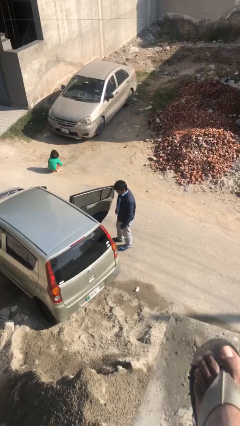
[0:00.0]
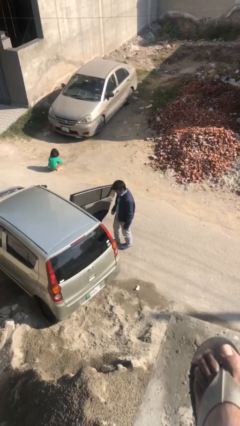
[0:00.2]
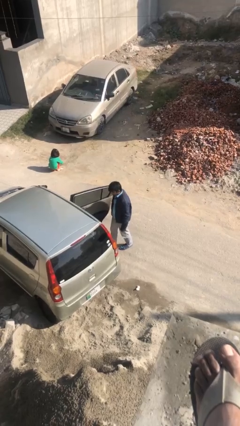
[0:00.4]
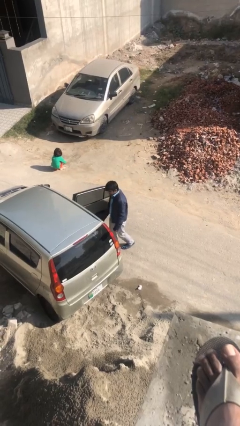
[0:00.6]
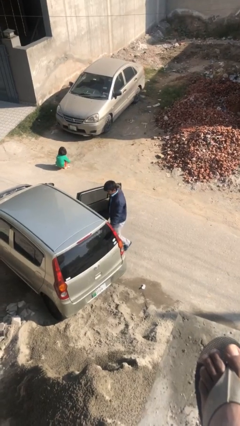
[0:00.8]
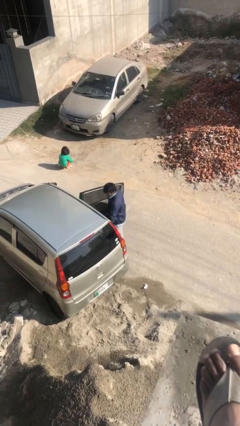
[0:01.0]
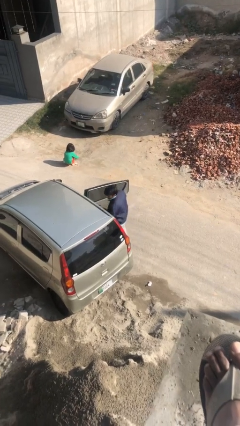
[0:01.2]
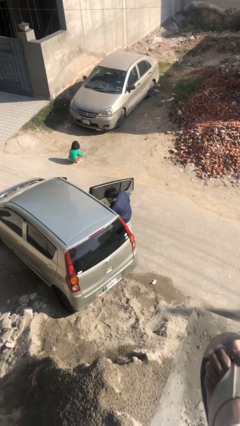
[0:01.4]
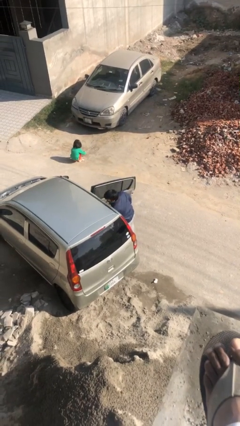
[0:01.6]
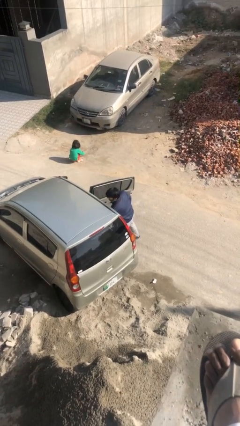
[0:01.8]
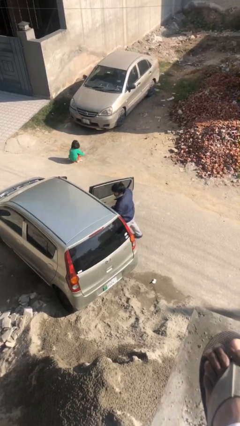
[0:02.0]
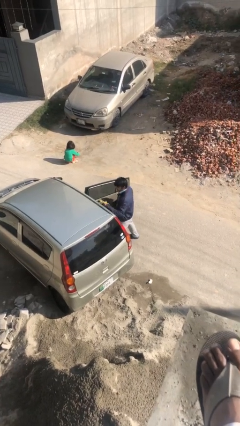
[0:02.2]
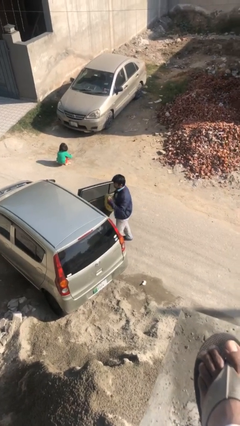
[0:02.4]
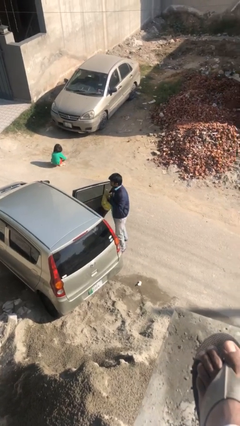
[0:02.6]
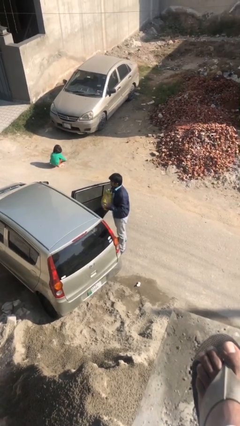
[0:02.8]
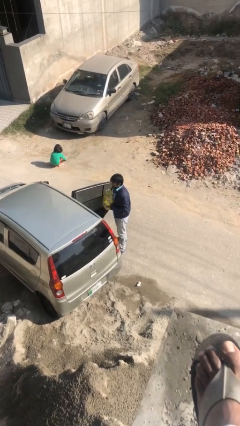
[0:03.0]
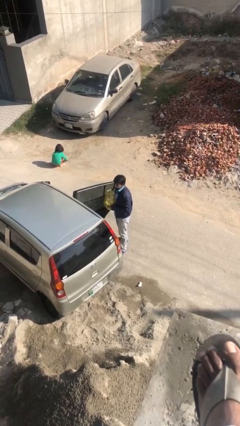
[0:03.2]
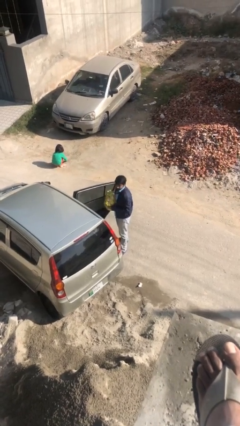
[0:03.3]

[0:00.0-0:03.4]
person unloads car

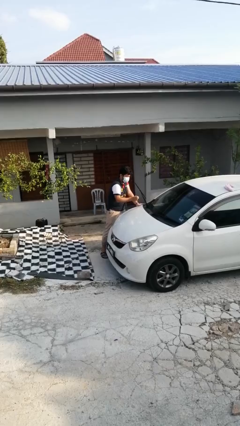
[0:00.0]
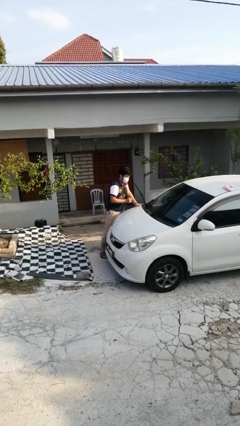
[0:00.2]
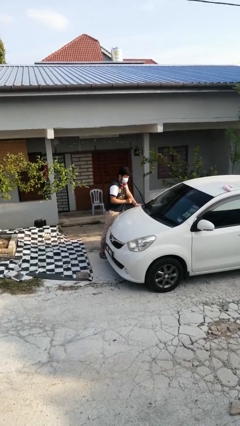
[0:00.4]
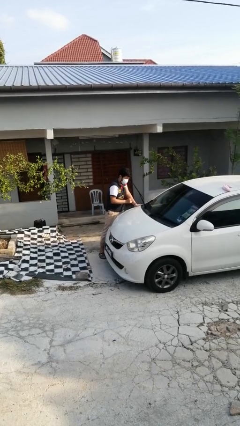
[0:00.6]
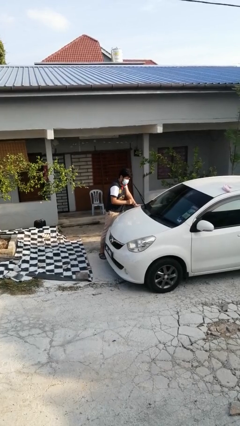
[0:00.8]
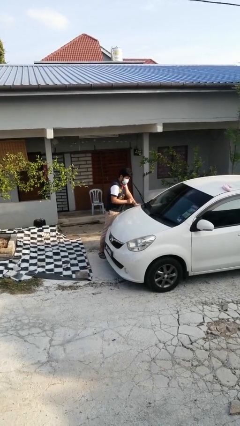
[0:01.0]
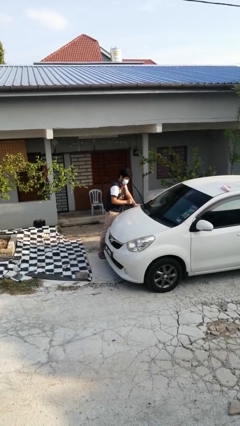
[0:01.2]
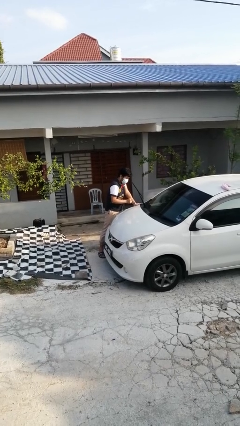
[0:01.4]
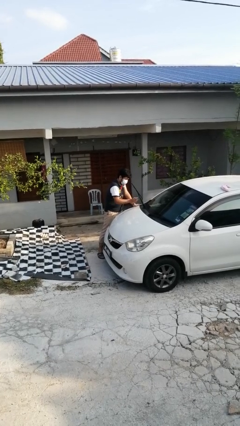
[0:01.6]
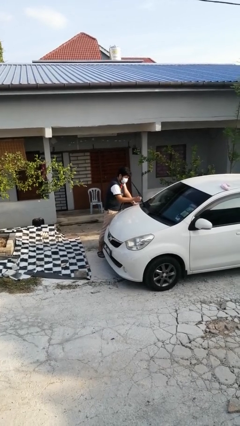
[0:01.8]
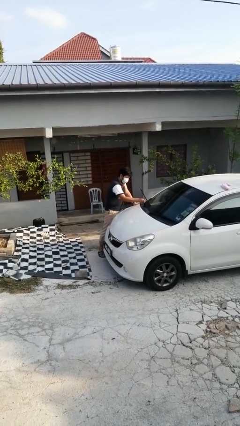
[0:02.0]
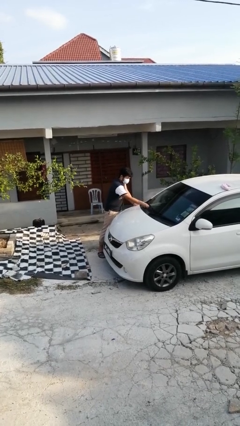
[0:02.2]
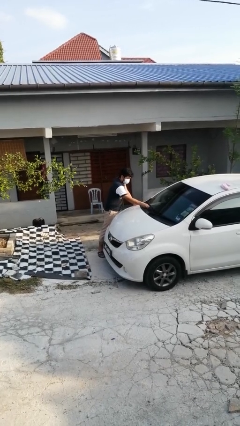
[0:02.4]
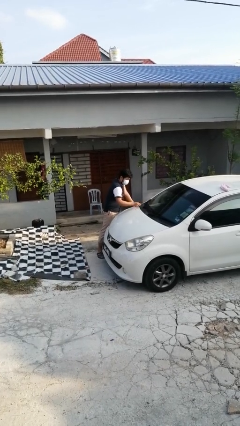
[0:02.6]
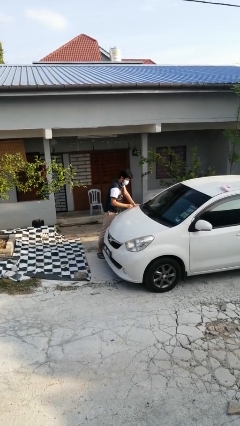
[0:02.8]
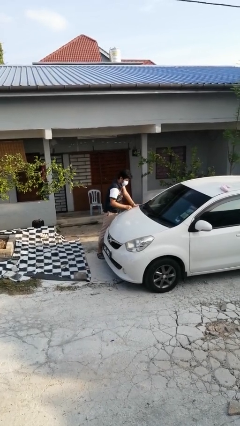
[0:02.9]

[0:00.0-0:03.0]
person flips down car wipers

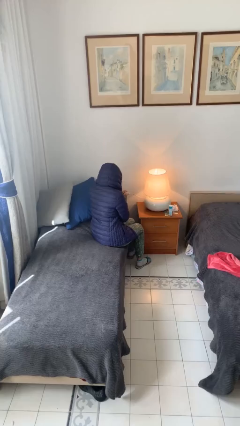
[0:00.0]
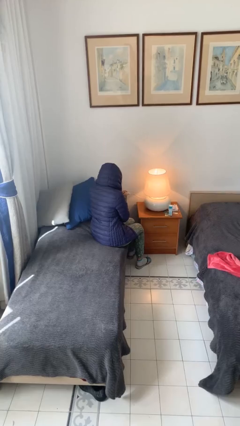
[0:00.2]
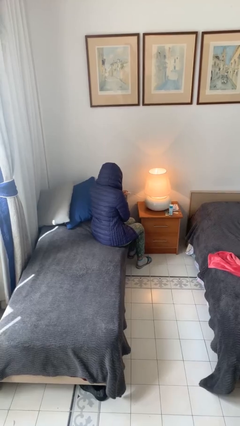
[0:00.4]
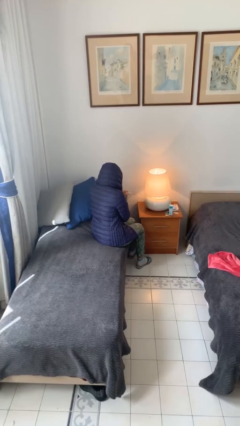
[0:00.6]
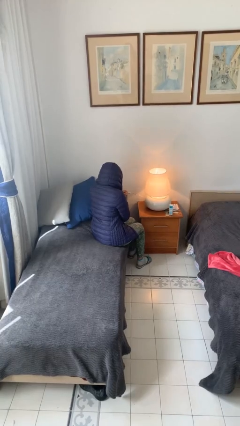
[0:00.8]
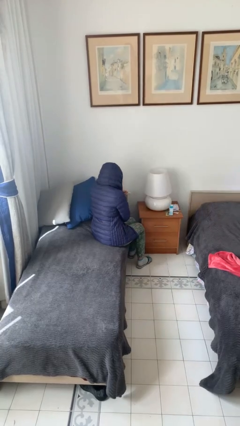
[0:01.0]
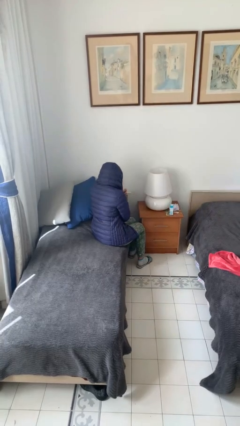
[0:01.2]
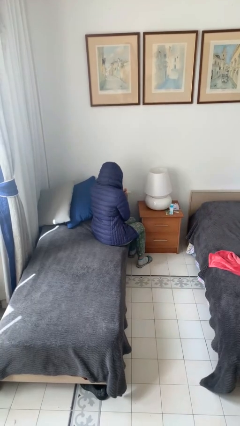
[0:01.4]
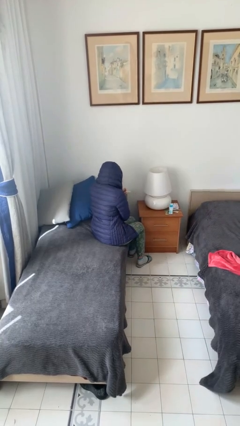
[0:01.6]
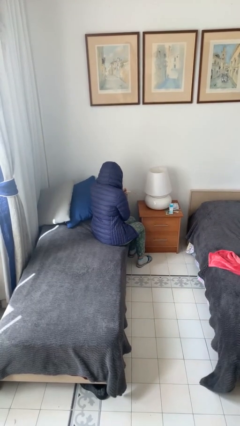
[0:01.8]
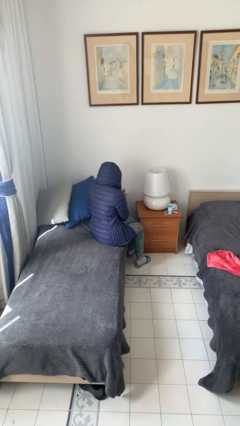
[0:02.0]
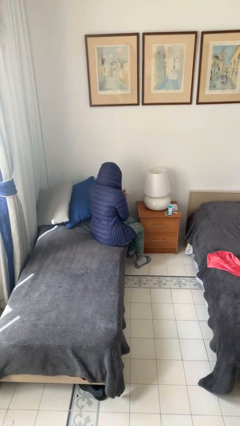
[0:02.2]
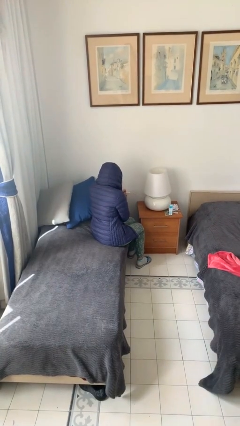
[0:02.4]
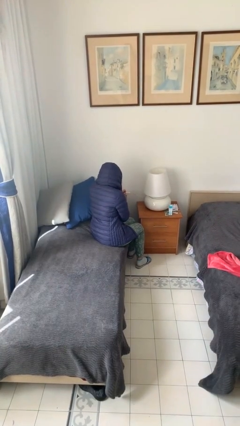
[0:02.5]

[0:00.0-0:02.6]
person turns off lamp

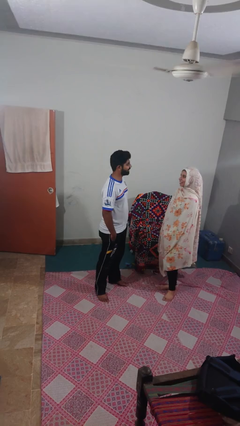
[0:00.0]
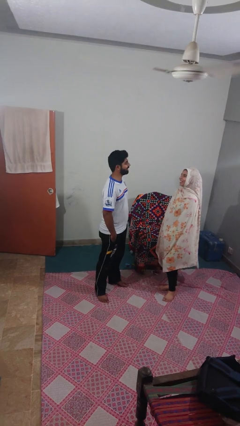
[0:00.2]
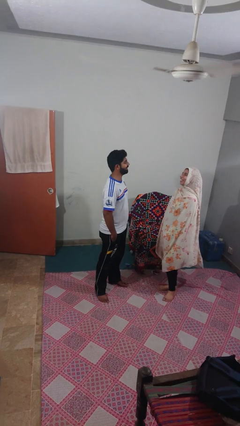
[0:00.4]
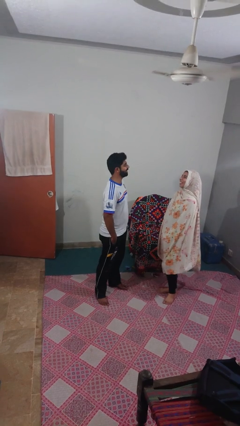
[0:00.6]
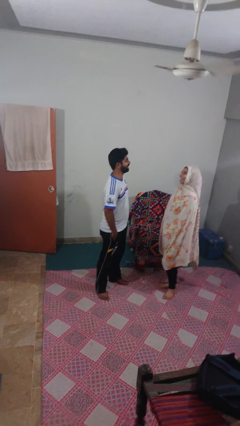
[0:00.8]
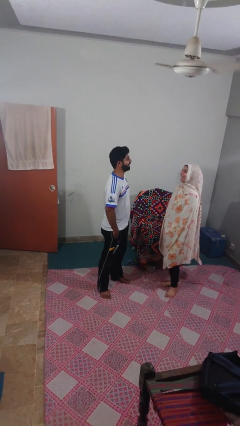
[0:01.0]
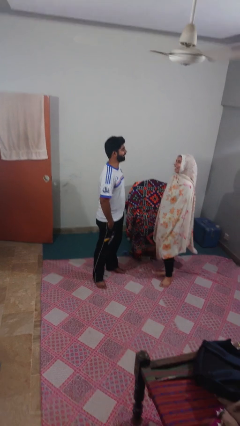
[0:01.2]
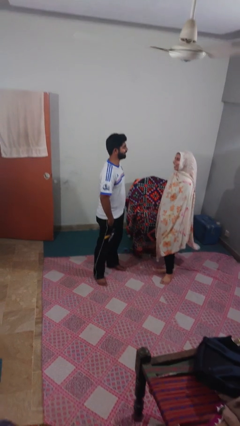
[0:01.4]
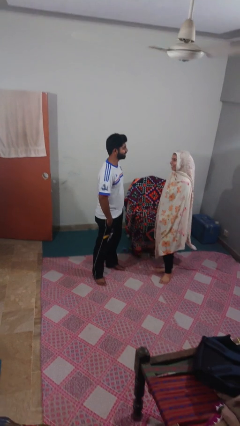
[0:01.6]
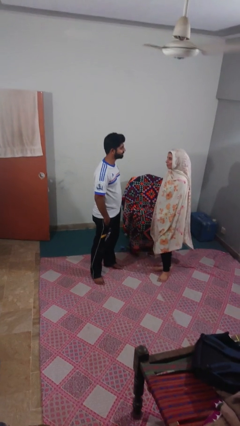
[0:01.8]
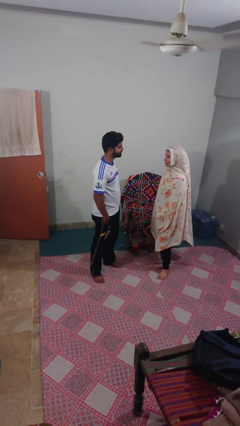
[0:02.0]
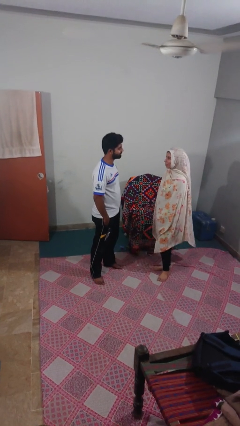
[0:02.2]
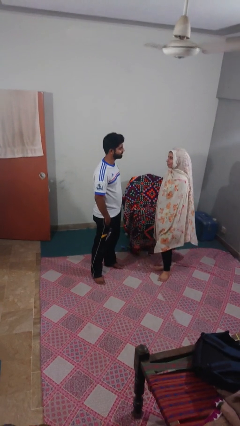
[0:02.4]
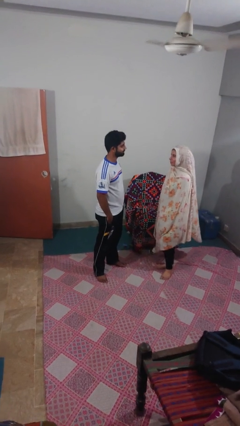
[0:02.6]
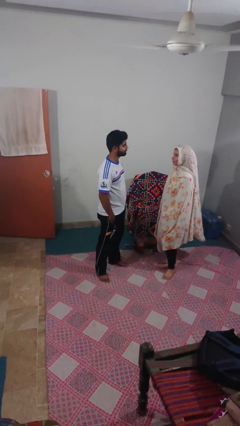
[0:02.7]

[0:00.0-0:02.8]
person laughs with person

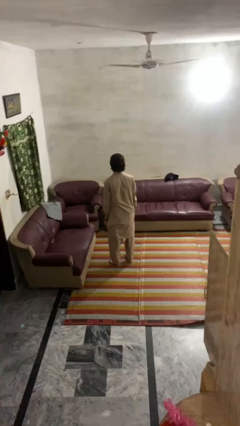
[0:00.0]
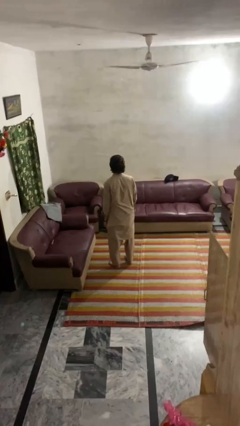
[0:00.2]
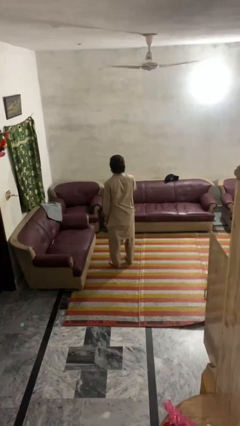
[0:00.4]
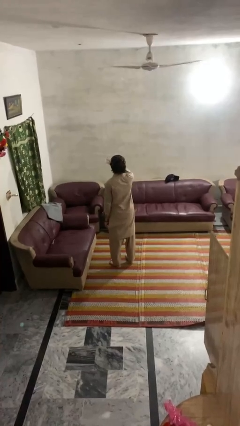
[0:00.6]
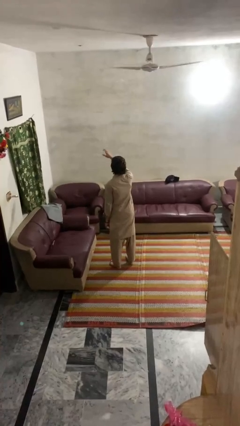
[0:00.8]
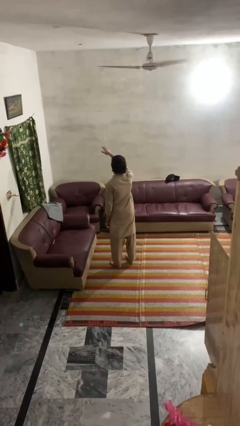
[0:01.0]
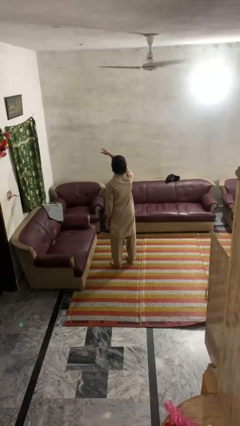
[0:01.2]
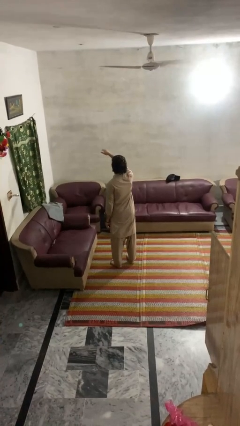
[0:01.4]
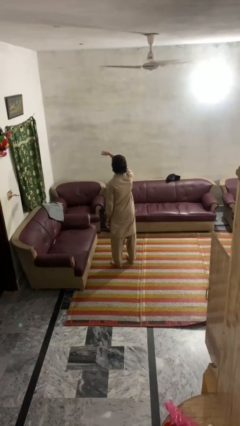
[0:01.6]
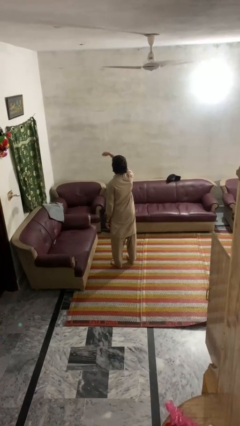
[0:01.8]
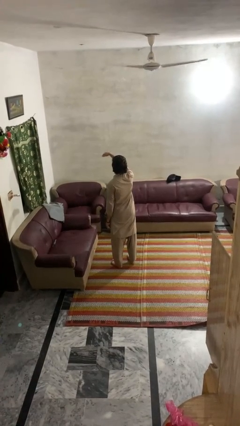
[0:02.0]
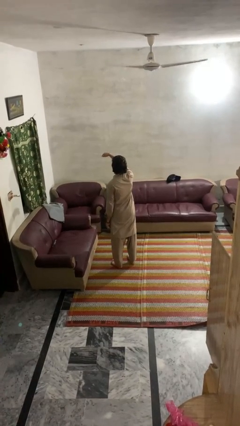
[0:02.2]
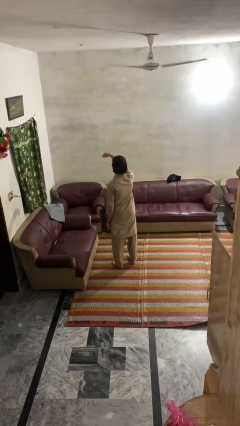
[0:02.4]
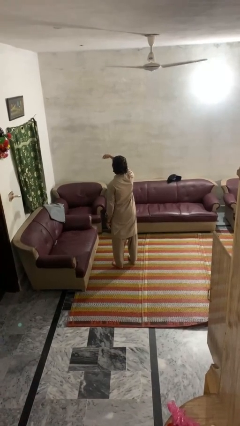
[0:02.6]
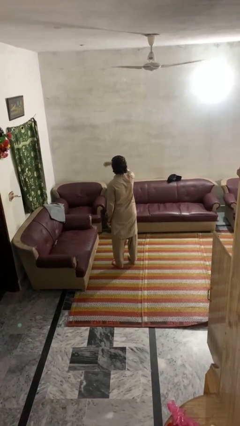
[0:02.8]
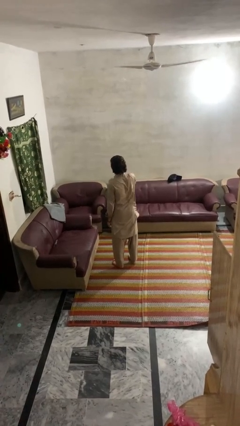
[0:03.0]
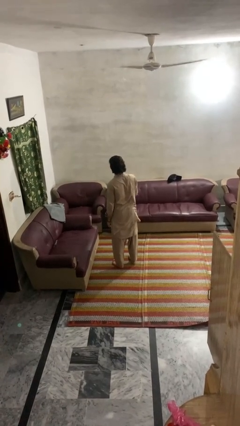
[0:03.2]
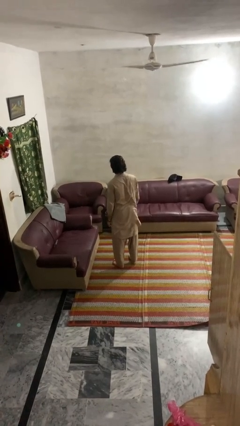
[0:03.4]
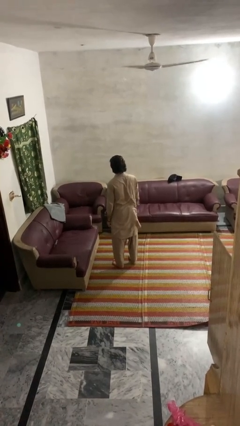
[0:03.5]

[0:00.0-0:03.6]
person gestures come here

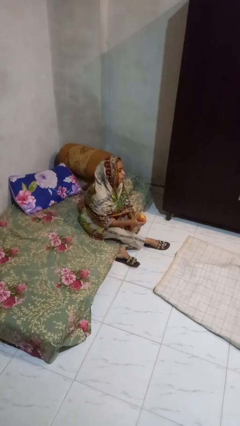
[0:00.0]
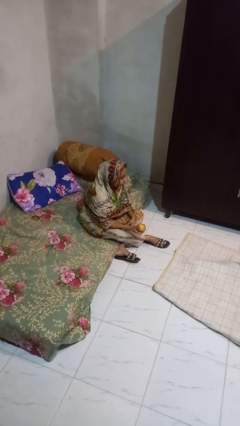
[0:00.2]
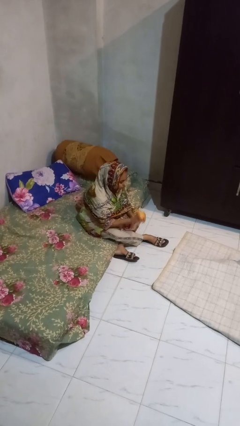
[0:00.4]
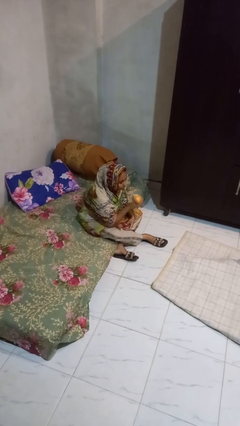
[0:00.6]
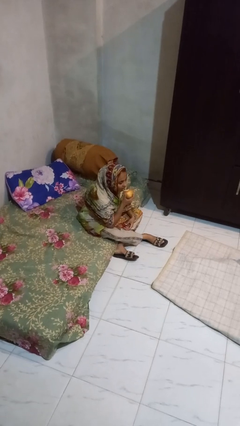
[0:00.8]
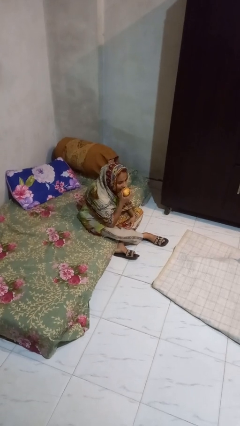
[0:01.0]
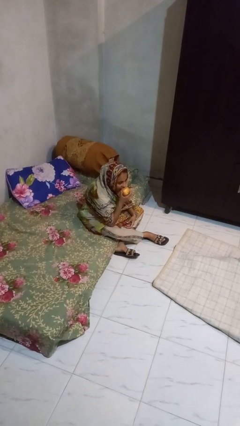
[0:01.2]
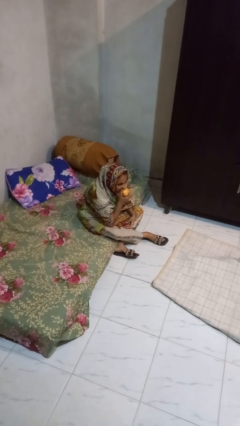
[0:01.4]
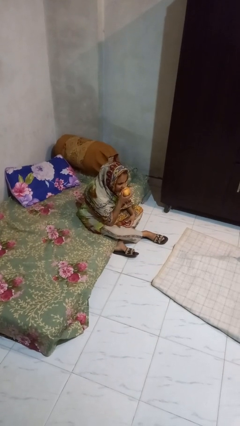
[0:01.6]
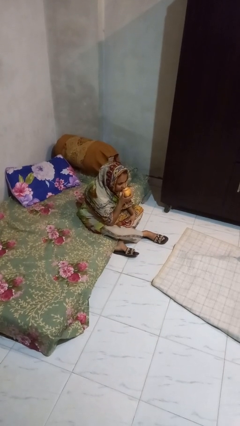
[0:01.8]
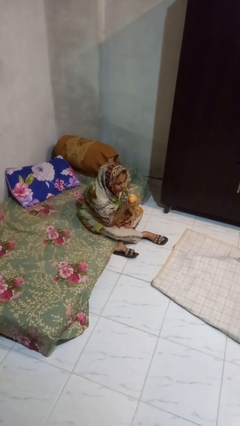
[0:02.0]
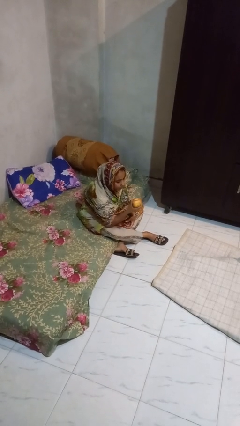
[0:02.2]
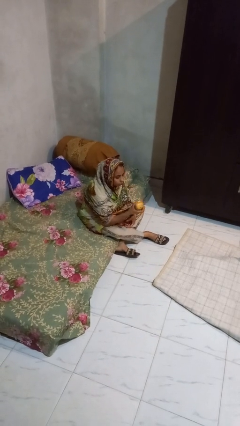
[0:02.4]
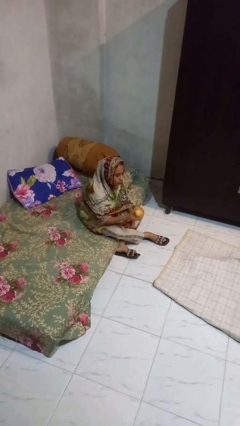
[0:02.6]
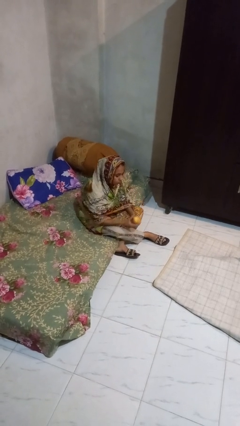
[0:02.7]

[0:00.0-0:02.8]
person eats apple
